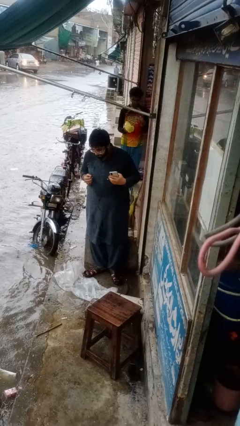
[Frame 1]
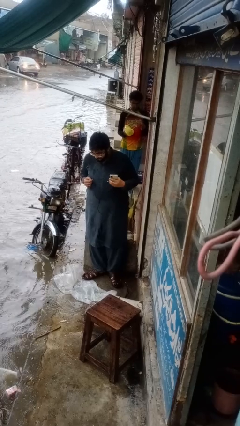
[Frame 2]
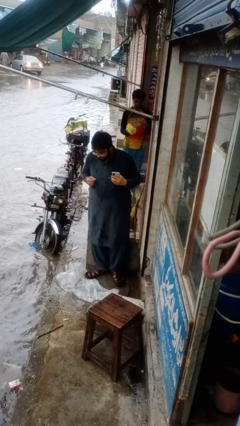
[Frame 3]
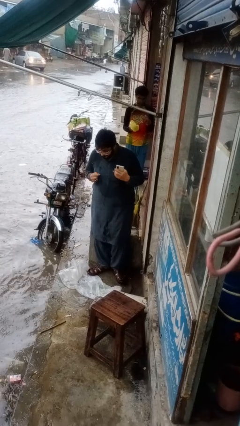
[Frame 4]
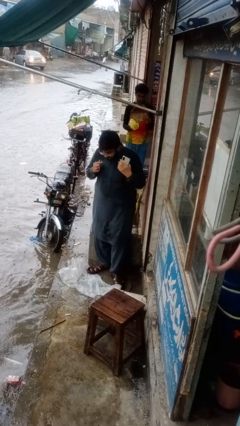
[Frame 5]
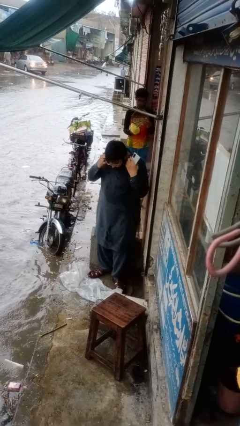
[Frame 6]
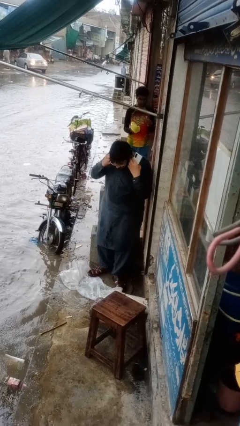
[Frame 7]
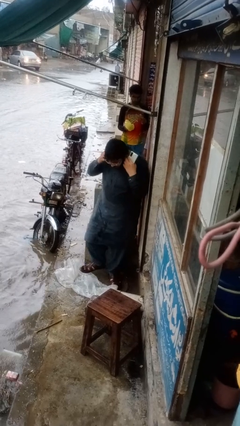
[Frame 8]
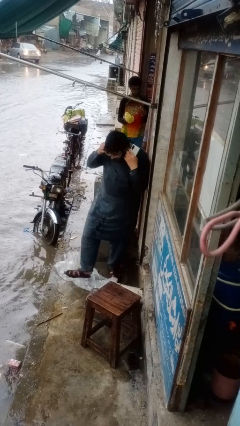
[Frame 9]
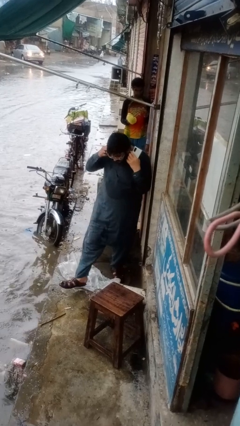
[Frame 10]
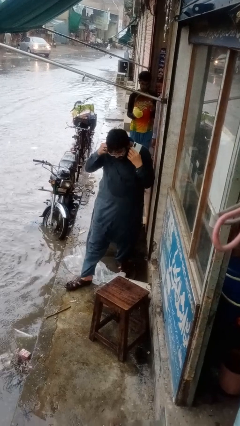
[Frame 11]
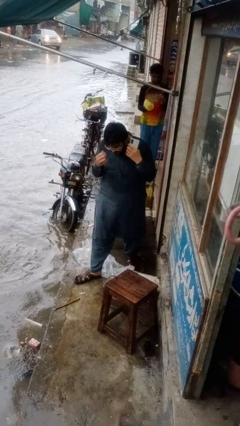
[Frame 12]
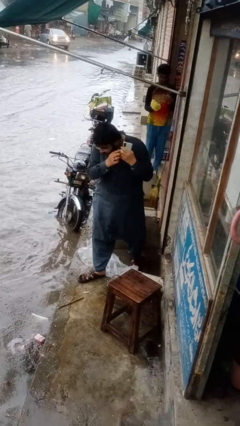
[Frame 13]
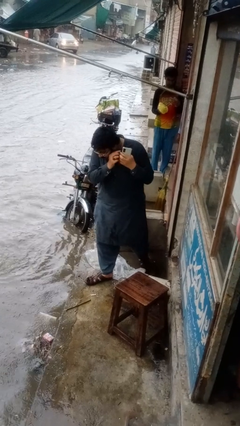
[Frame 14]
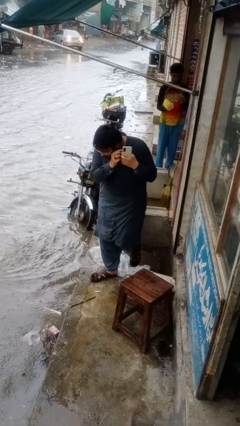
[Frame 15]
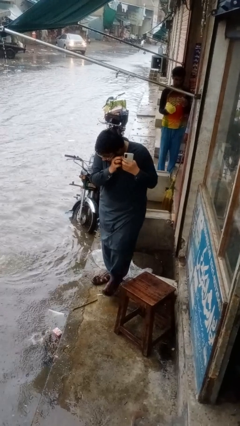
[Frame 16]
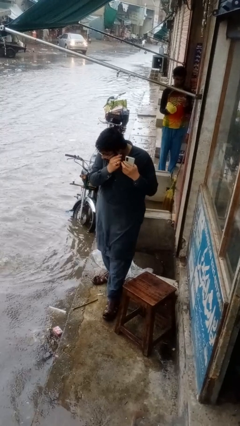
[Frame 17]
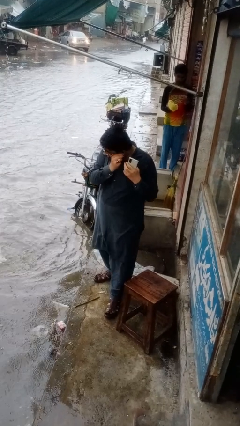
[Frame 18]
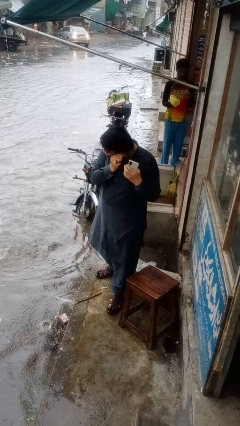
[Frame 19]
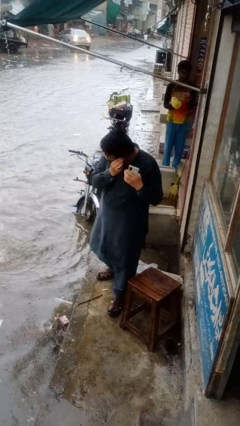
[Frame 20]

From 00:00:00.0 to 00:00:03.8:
person puts on headphones

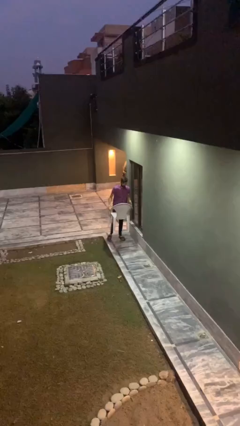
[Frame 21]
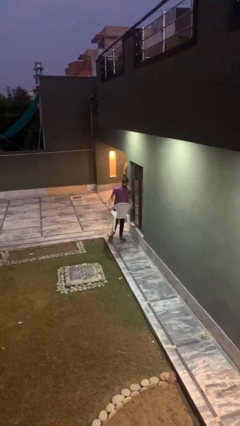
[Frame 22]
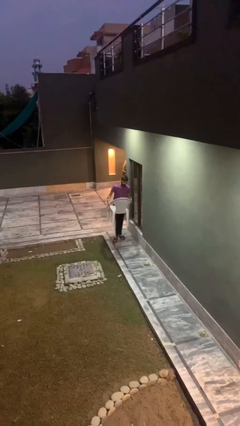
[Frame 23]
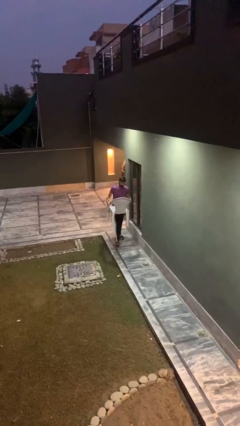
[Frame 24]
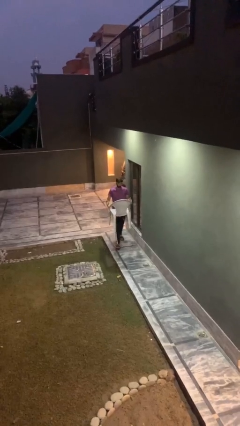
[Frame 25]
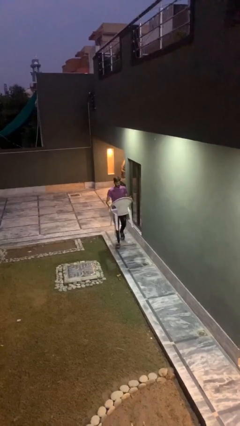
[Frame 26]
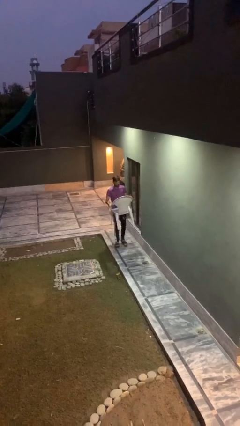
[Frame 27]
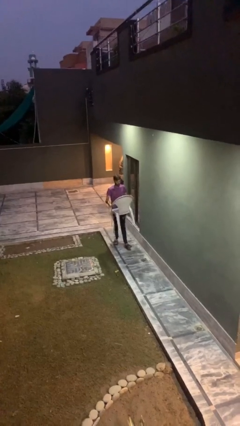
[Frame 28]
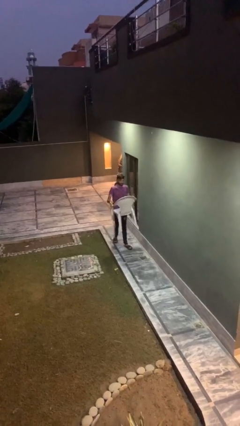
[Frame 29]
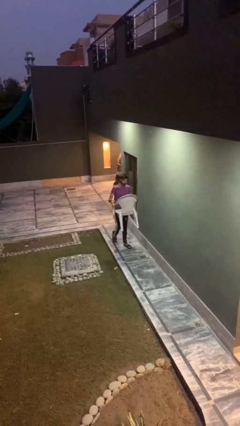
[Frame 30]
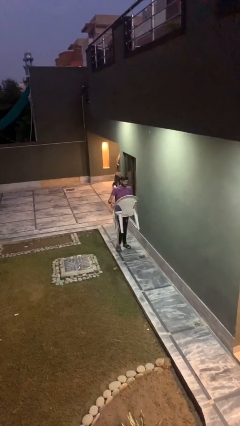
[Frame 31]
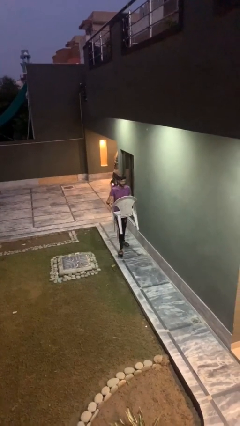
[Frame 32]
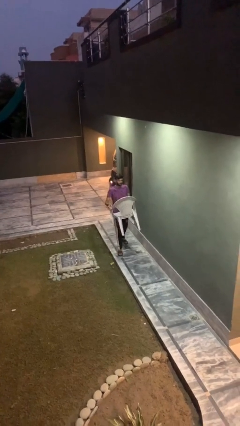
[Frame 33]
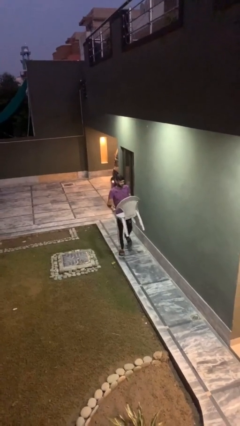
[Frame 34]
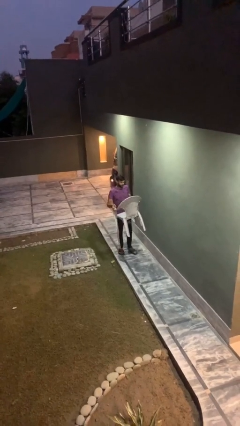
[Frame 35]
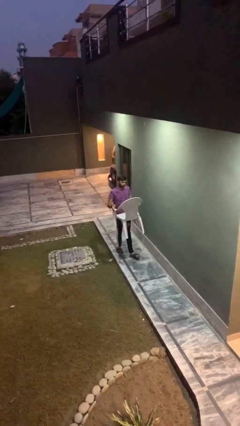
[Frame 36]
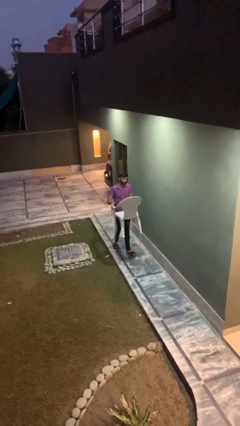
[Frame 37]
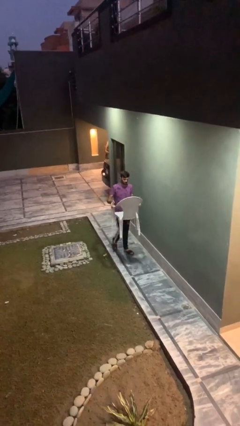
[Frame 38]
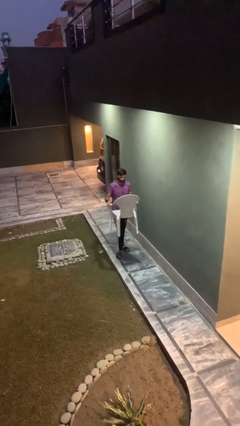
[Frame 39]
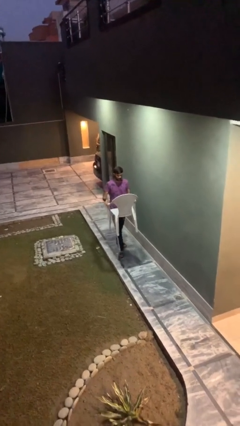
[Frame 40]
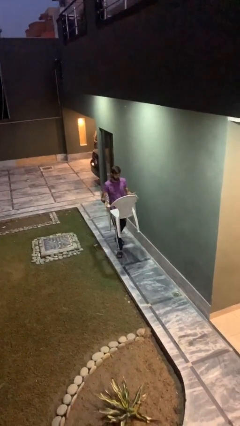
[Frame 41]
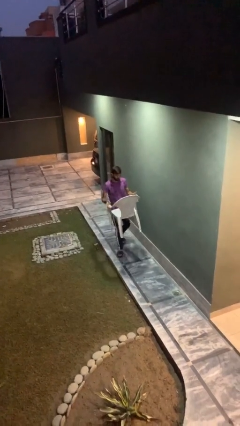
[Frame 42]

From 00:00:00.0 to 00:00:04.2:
person carries heavy object

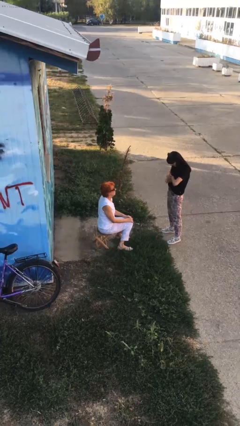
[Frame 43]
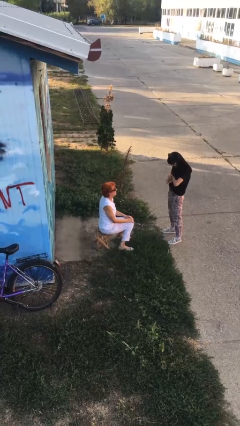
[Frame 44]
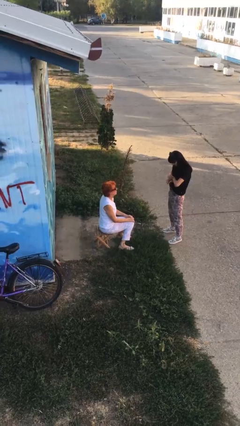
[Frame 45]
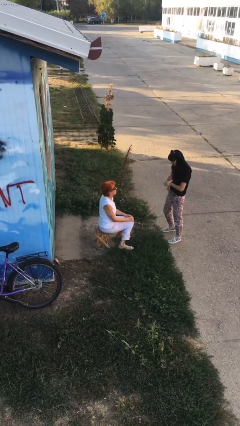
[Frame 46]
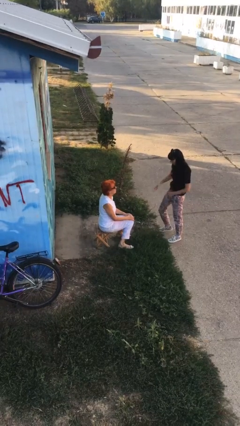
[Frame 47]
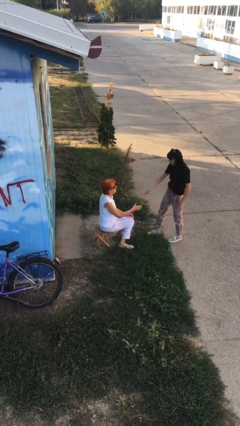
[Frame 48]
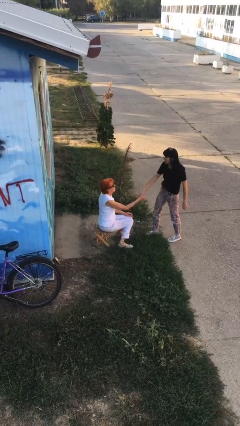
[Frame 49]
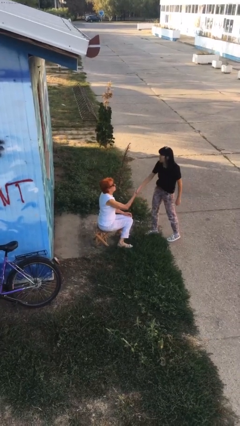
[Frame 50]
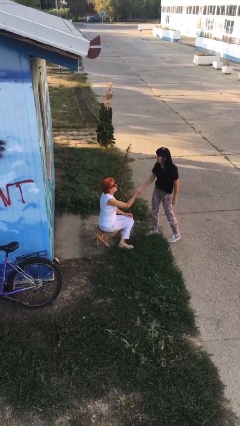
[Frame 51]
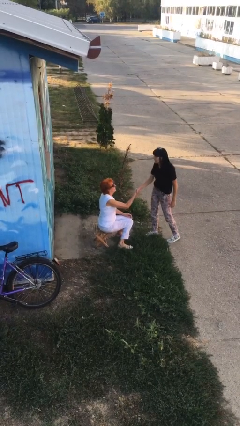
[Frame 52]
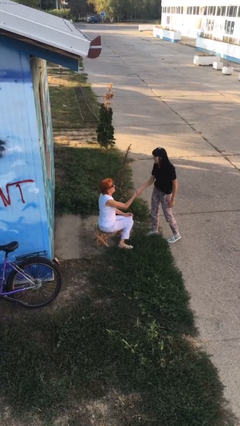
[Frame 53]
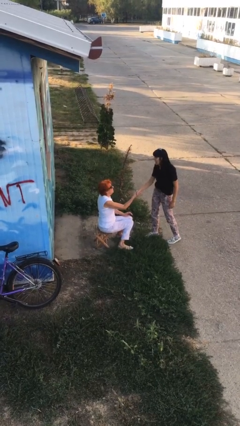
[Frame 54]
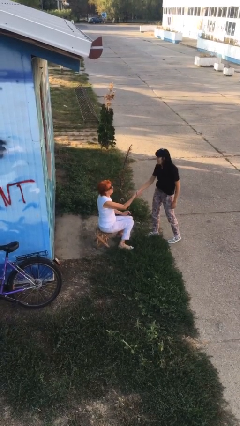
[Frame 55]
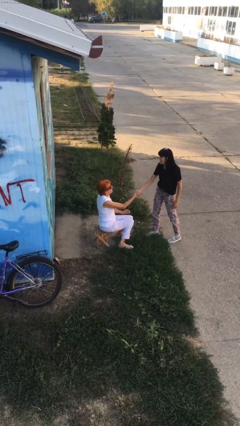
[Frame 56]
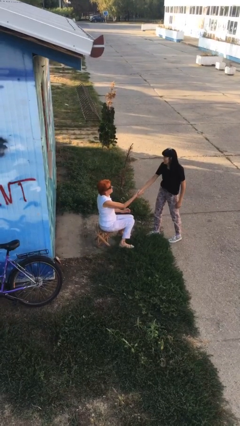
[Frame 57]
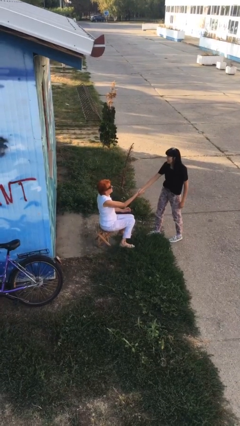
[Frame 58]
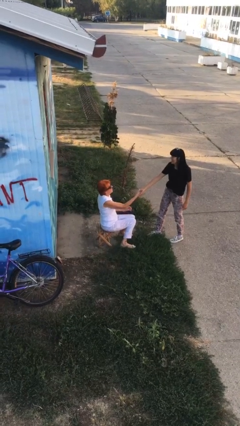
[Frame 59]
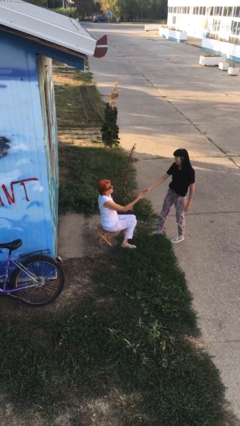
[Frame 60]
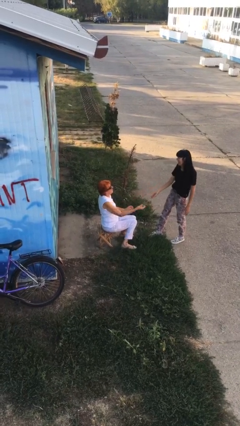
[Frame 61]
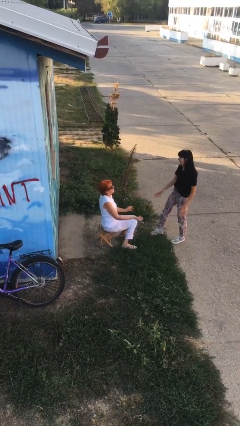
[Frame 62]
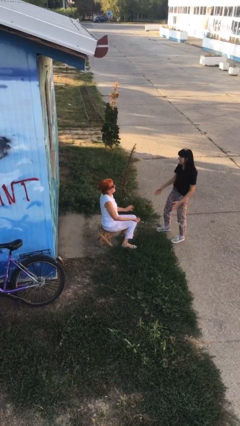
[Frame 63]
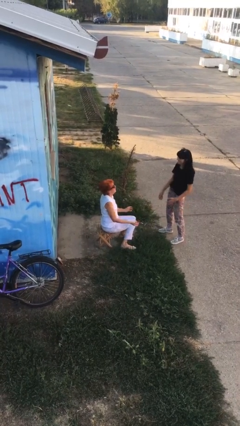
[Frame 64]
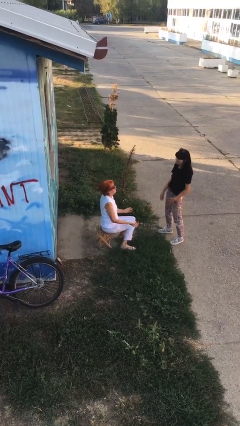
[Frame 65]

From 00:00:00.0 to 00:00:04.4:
person shakes hand

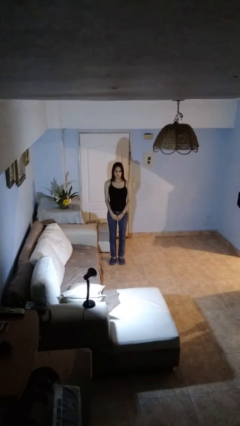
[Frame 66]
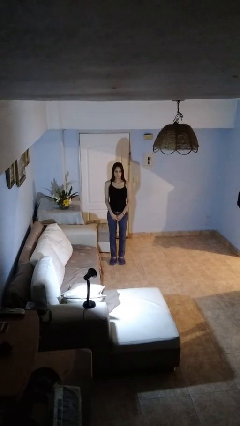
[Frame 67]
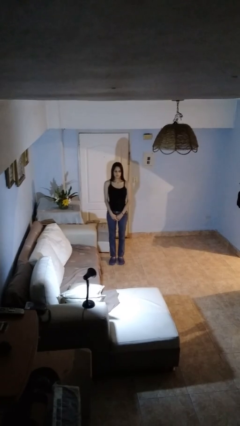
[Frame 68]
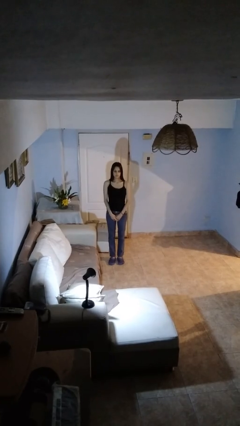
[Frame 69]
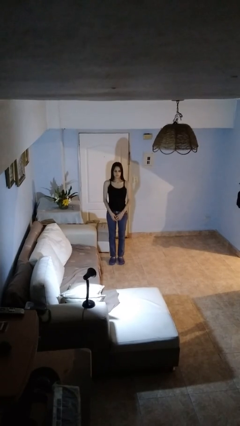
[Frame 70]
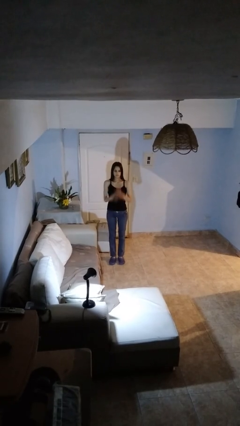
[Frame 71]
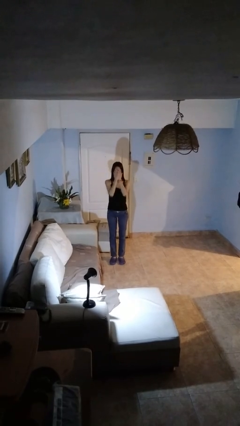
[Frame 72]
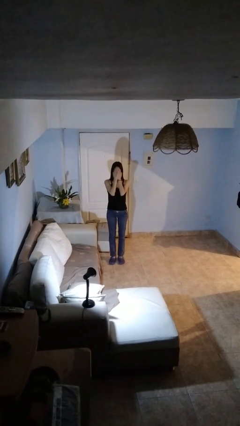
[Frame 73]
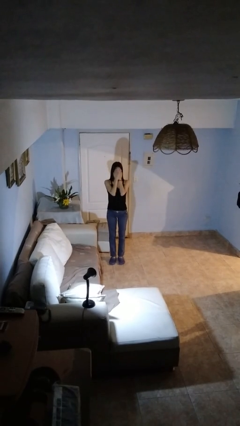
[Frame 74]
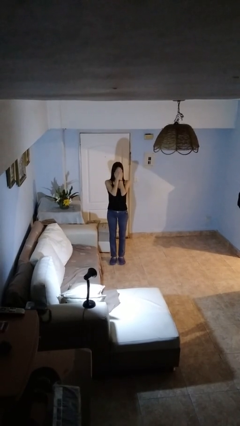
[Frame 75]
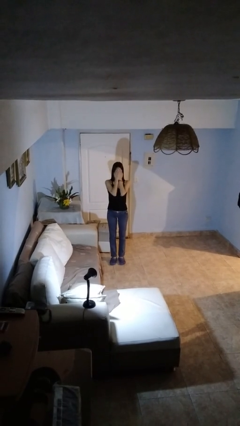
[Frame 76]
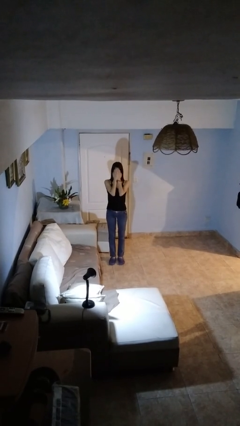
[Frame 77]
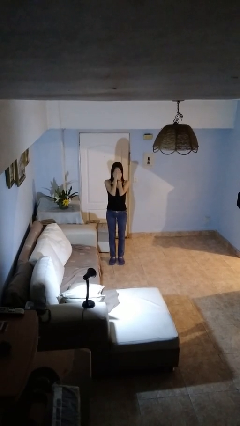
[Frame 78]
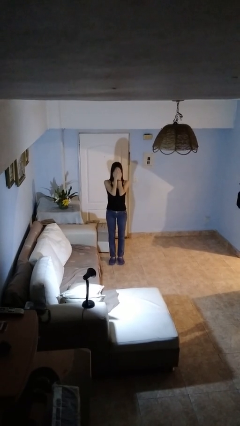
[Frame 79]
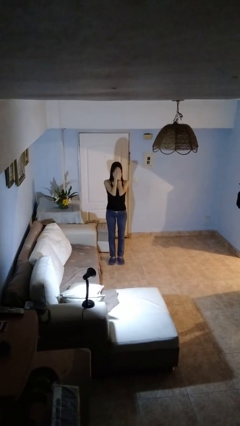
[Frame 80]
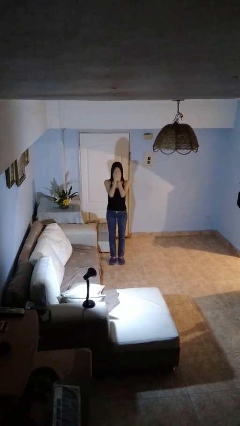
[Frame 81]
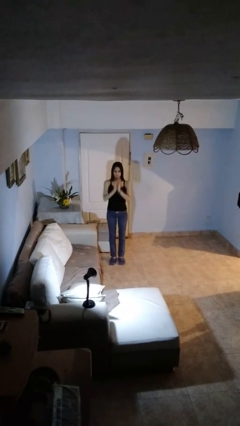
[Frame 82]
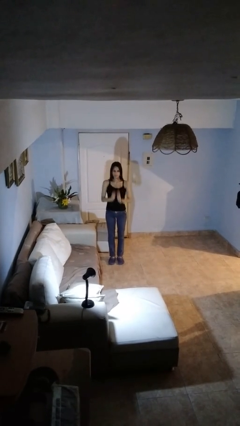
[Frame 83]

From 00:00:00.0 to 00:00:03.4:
person covers face with hands

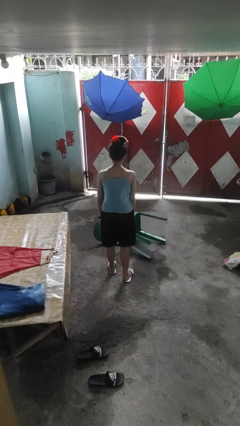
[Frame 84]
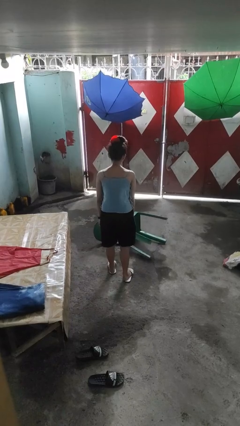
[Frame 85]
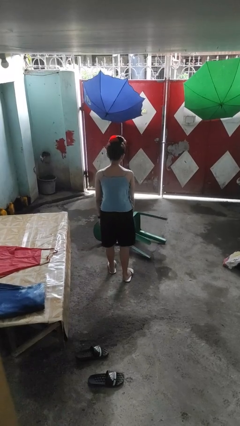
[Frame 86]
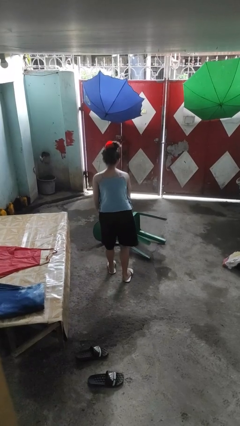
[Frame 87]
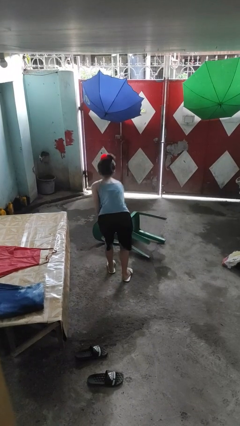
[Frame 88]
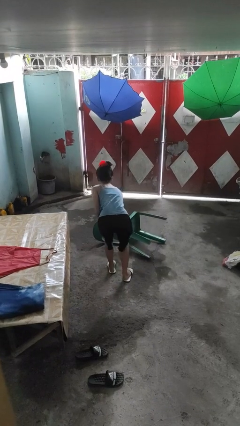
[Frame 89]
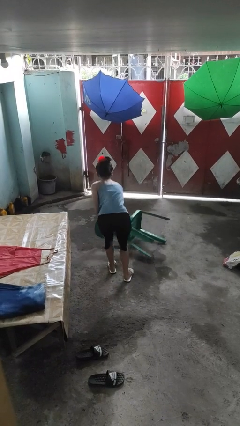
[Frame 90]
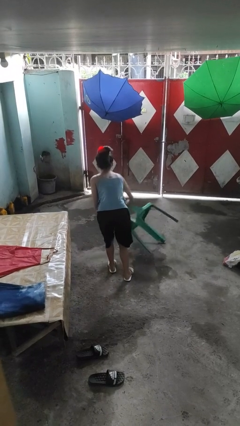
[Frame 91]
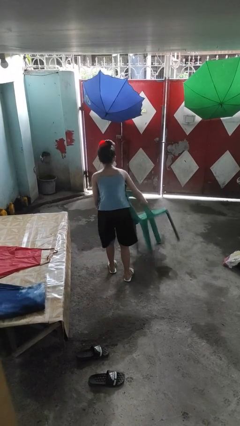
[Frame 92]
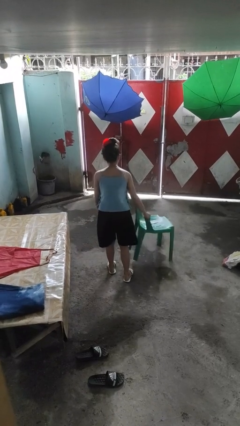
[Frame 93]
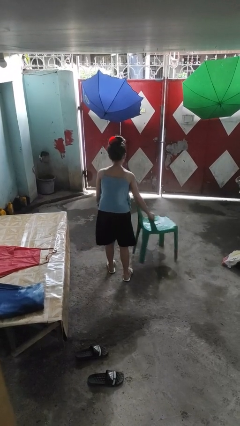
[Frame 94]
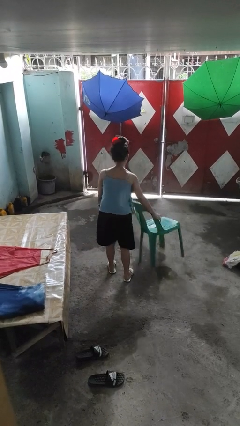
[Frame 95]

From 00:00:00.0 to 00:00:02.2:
person sets upright furniture
